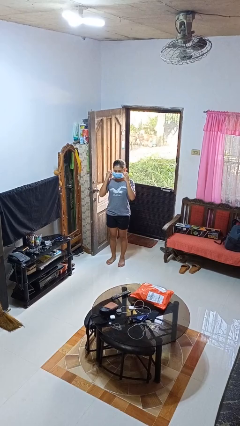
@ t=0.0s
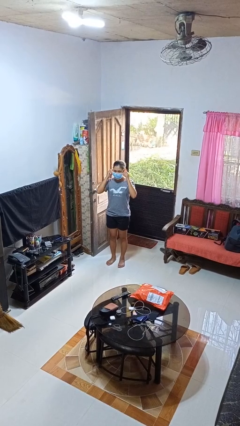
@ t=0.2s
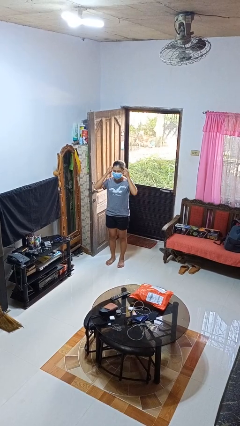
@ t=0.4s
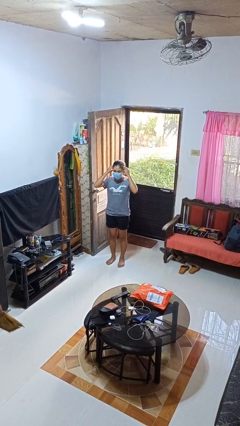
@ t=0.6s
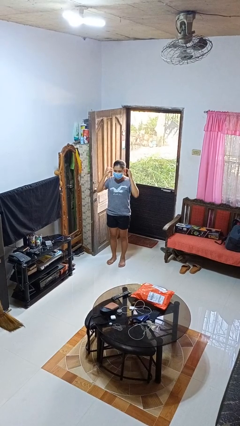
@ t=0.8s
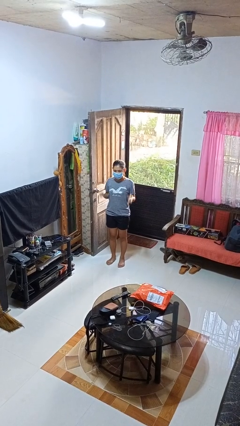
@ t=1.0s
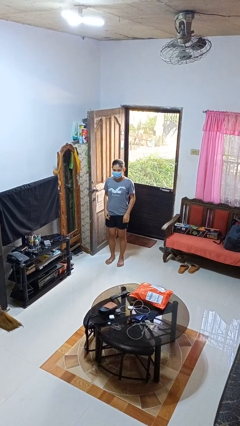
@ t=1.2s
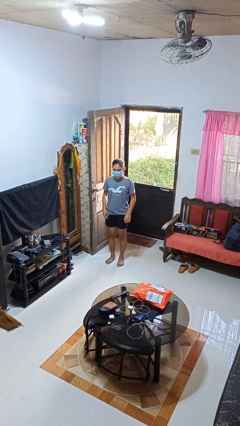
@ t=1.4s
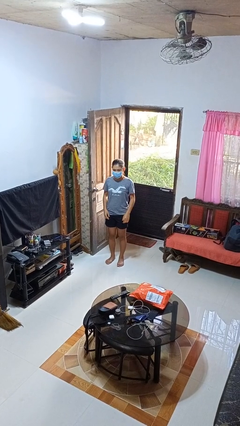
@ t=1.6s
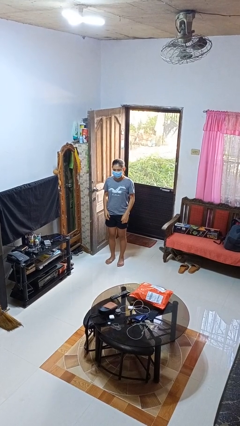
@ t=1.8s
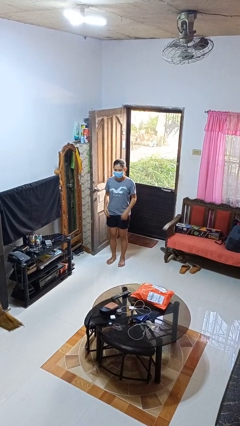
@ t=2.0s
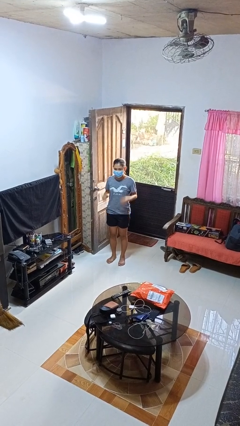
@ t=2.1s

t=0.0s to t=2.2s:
person puts on facemask

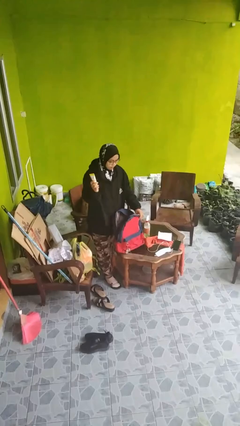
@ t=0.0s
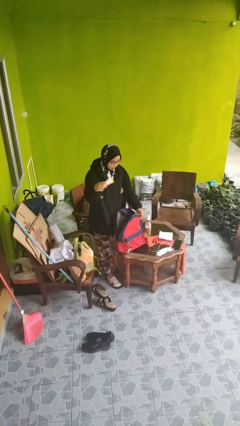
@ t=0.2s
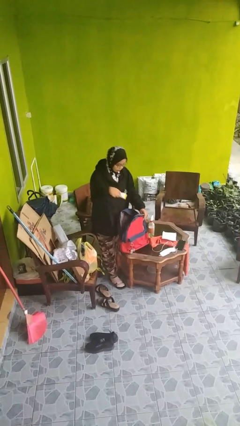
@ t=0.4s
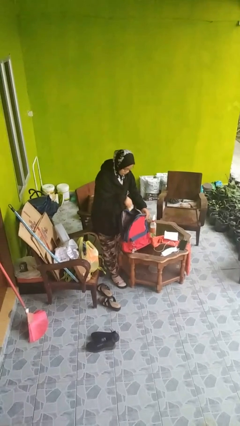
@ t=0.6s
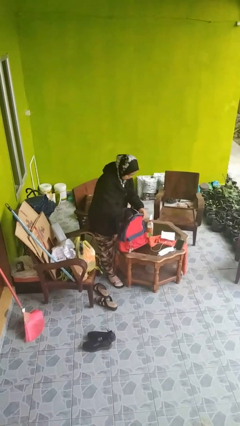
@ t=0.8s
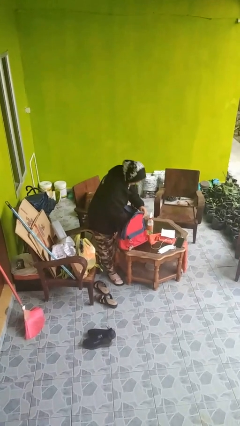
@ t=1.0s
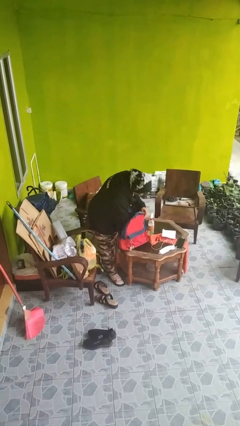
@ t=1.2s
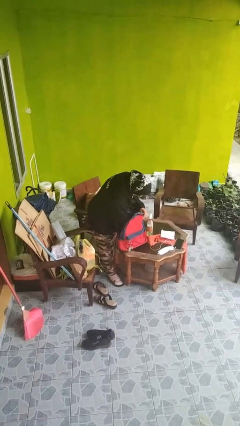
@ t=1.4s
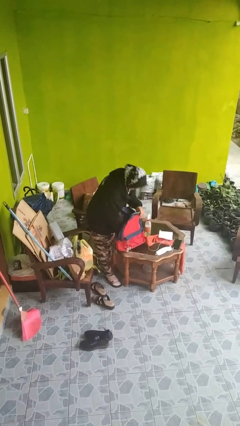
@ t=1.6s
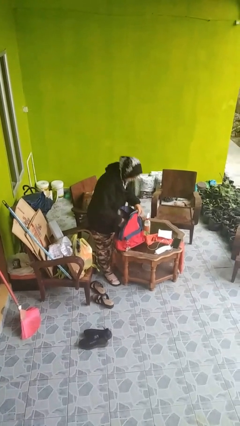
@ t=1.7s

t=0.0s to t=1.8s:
person puts object into backpack

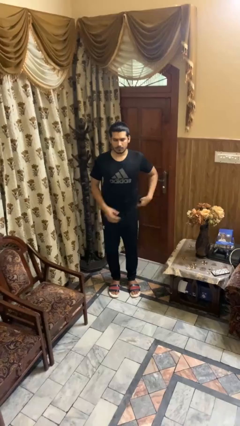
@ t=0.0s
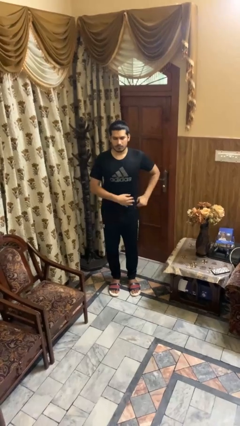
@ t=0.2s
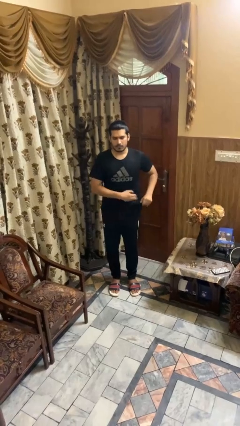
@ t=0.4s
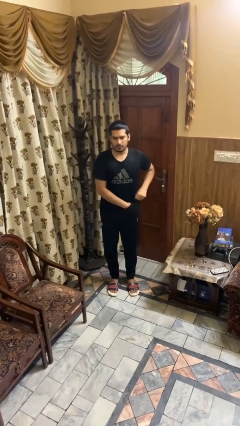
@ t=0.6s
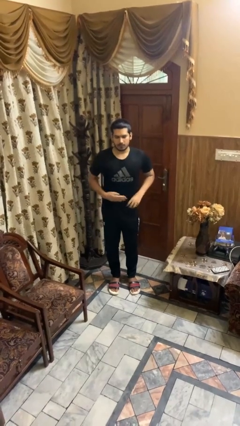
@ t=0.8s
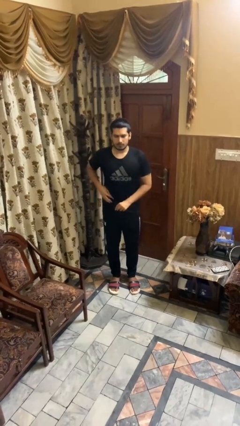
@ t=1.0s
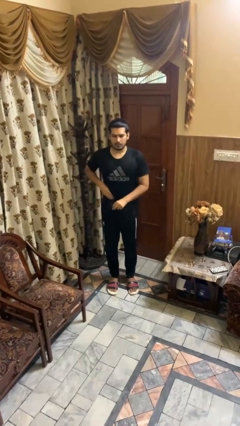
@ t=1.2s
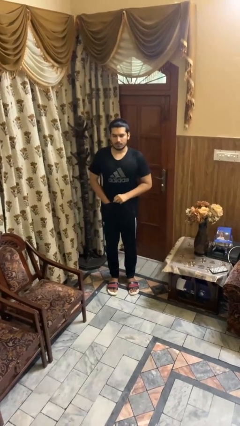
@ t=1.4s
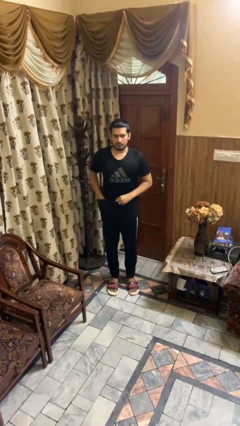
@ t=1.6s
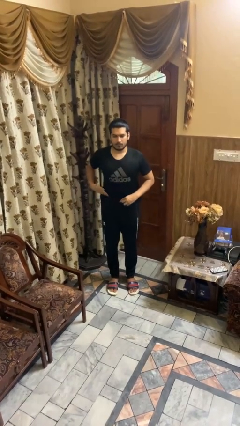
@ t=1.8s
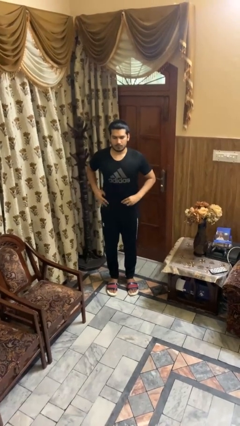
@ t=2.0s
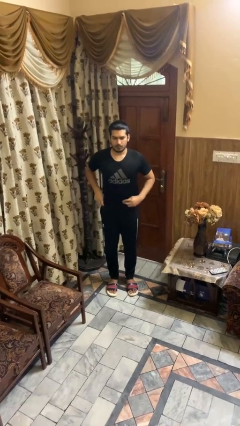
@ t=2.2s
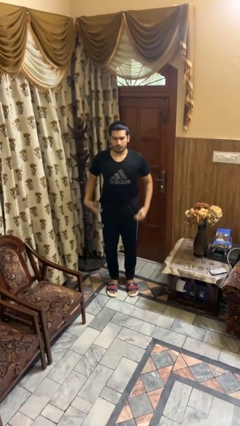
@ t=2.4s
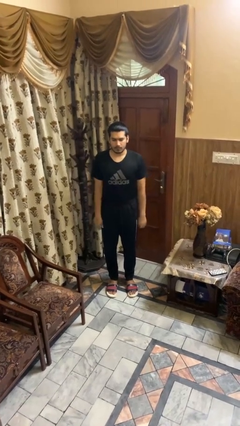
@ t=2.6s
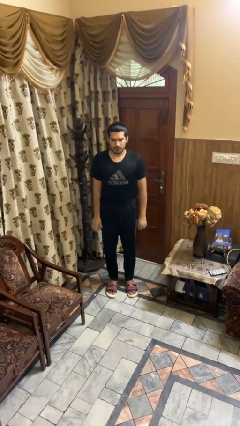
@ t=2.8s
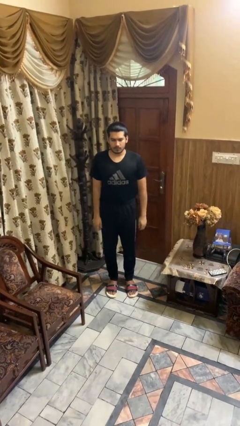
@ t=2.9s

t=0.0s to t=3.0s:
person tucks in shirt

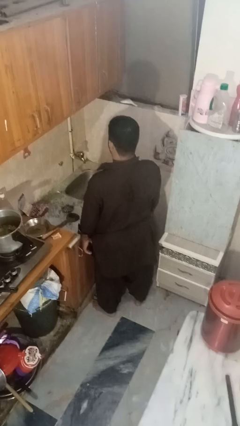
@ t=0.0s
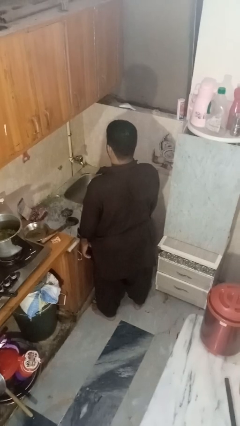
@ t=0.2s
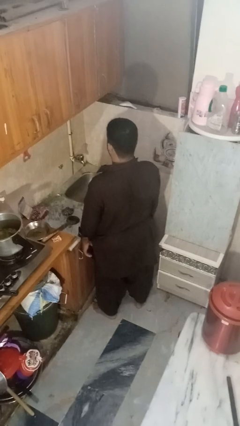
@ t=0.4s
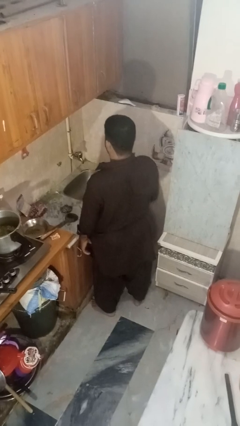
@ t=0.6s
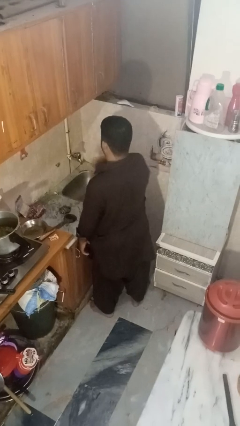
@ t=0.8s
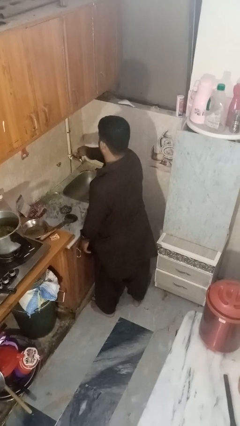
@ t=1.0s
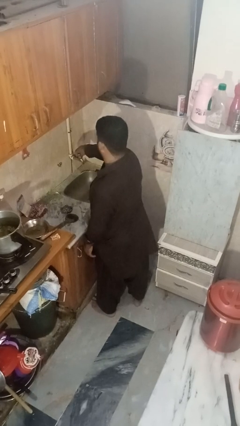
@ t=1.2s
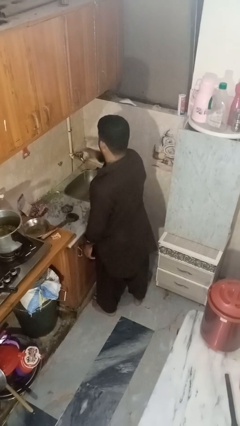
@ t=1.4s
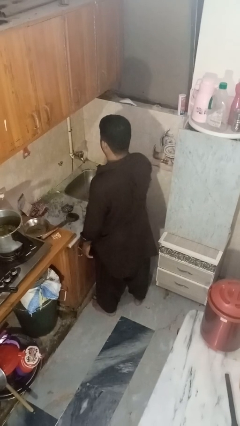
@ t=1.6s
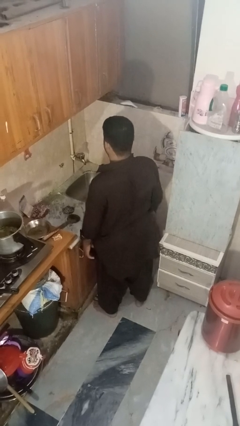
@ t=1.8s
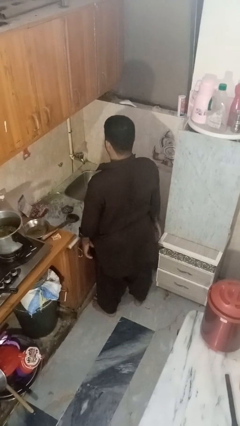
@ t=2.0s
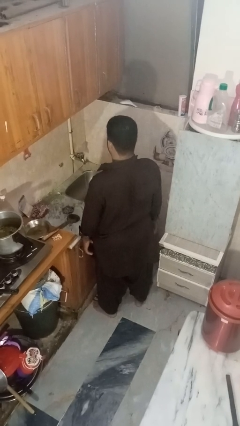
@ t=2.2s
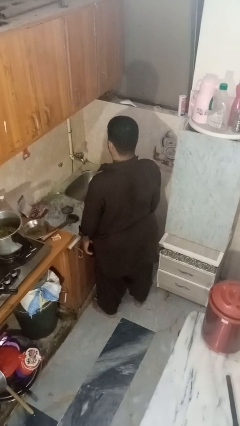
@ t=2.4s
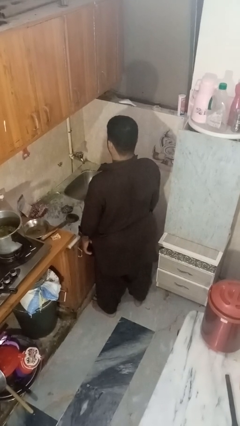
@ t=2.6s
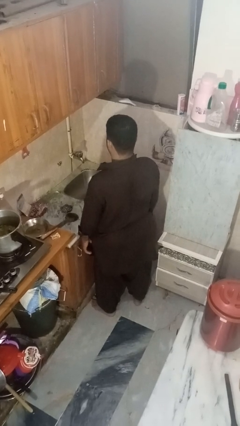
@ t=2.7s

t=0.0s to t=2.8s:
person turns on faucet

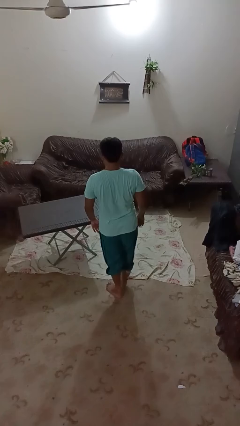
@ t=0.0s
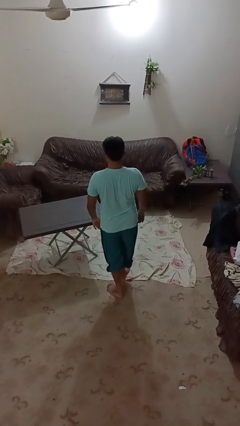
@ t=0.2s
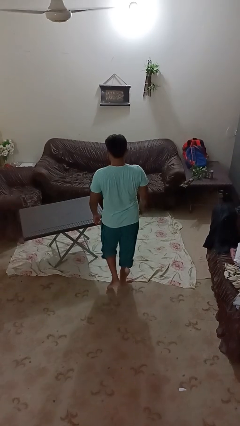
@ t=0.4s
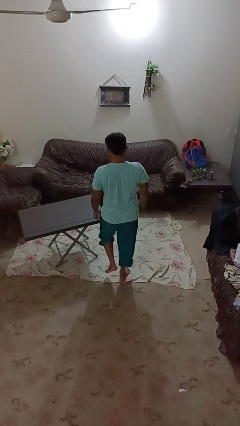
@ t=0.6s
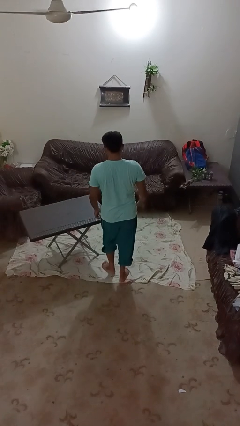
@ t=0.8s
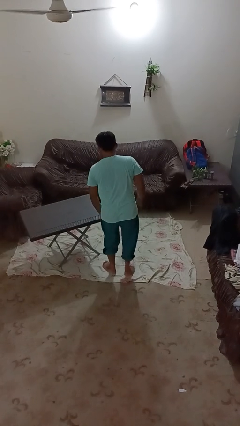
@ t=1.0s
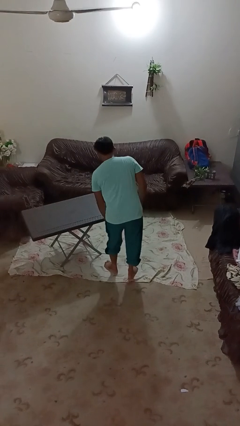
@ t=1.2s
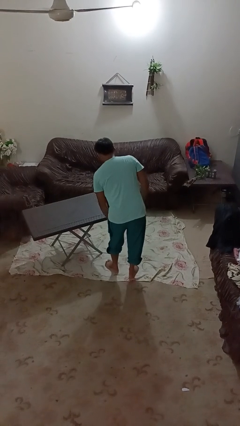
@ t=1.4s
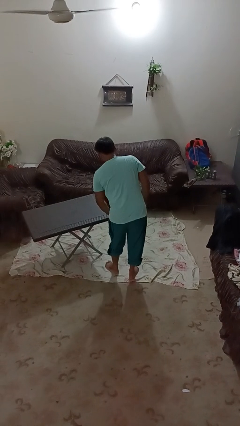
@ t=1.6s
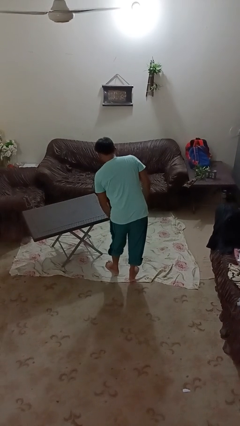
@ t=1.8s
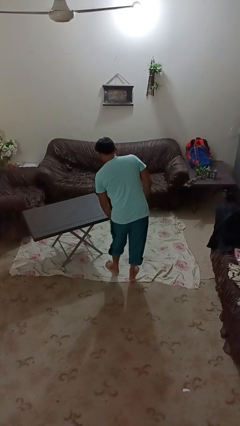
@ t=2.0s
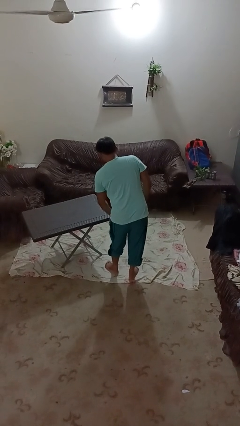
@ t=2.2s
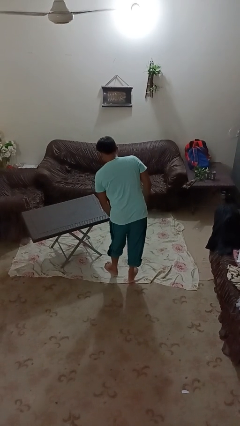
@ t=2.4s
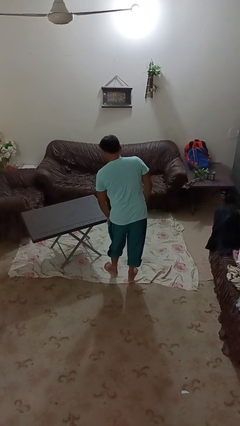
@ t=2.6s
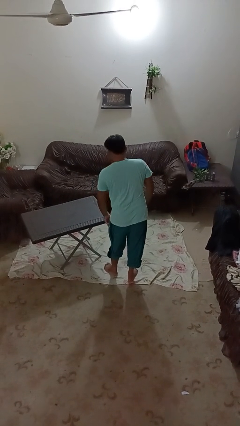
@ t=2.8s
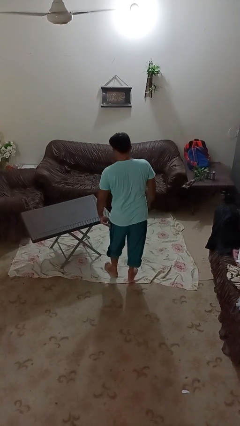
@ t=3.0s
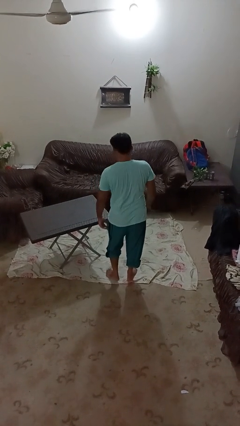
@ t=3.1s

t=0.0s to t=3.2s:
person bumps into table

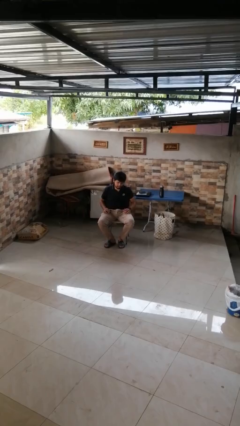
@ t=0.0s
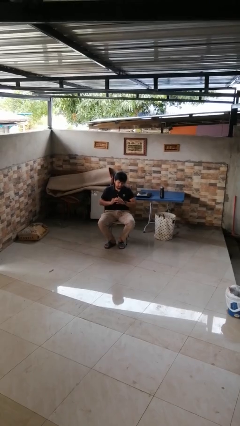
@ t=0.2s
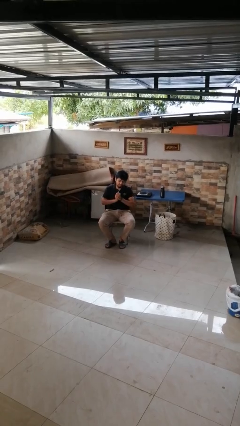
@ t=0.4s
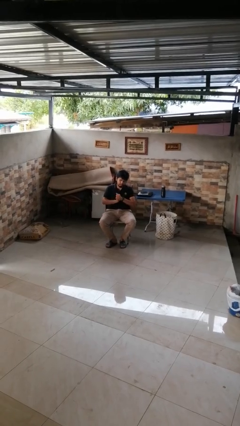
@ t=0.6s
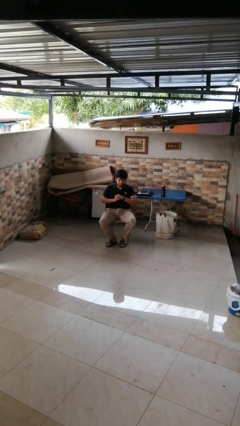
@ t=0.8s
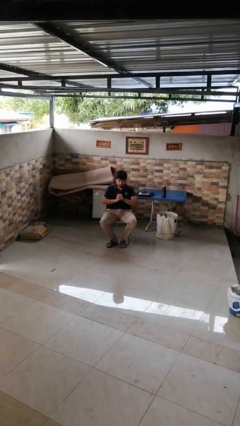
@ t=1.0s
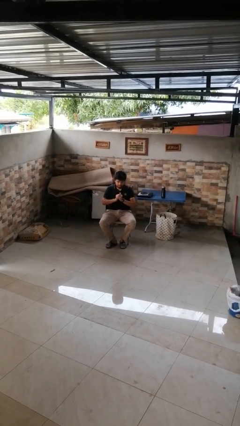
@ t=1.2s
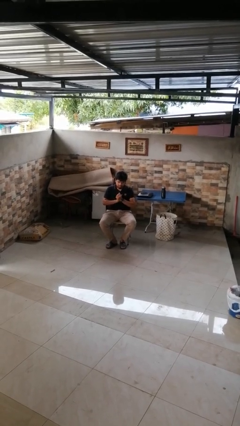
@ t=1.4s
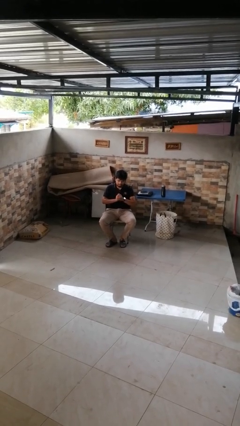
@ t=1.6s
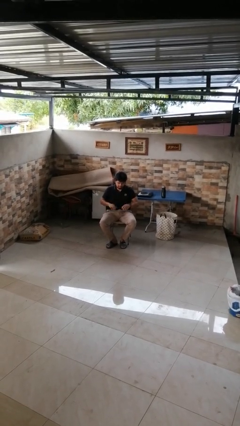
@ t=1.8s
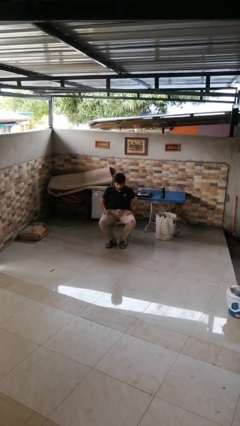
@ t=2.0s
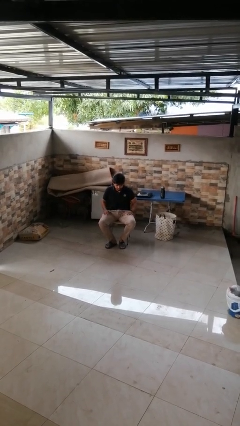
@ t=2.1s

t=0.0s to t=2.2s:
person cracks knuckles

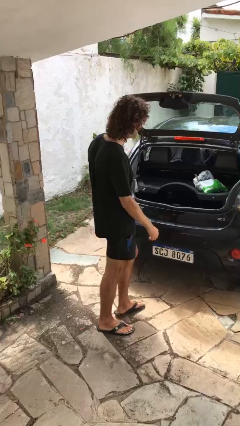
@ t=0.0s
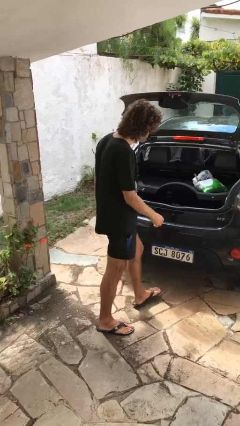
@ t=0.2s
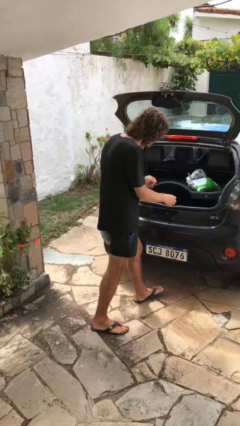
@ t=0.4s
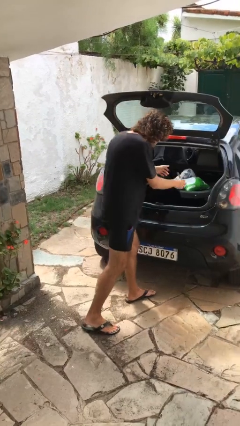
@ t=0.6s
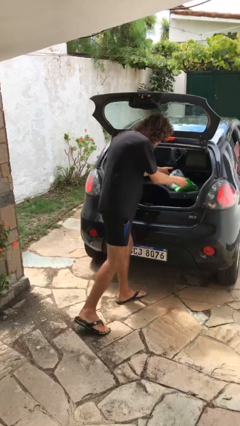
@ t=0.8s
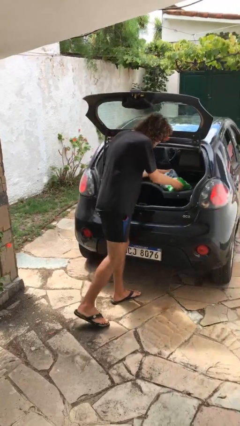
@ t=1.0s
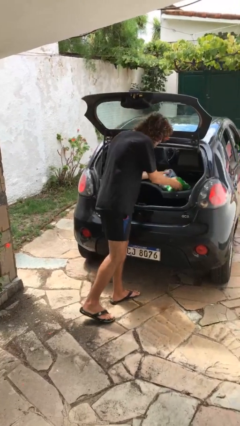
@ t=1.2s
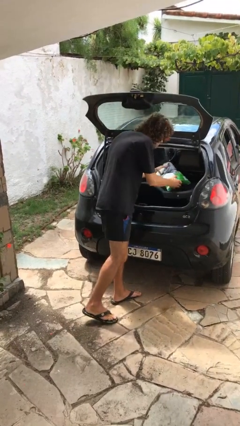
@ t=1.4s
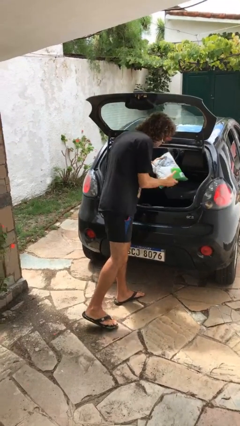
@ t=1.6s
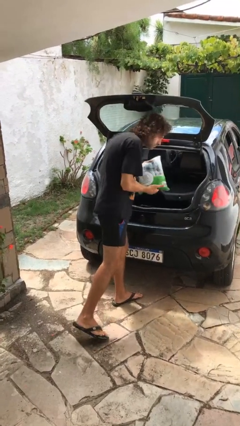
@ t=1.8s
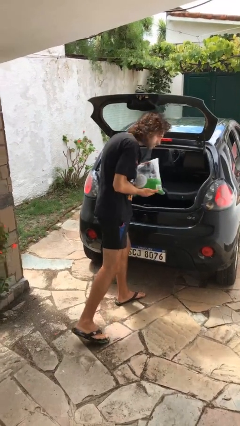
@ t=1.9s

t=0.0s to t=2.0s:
person unloads car
